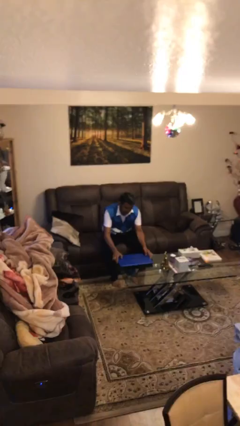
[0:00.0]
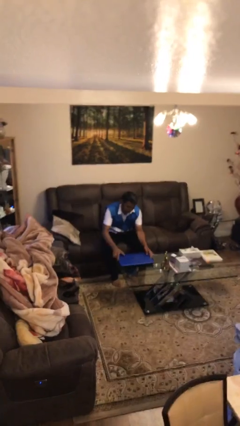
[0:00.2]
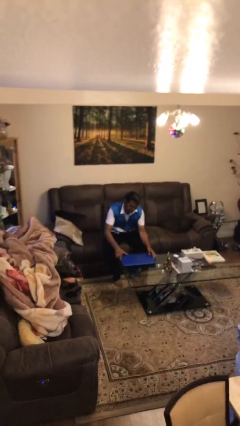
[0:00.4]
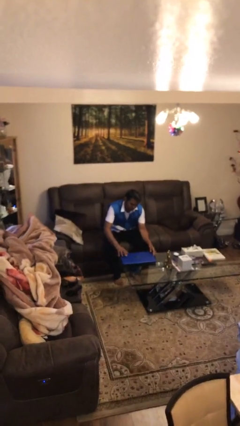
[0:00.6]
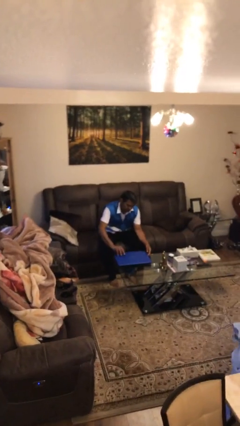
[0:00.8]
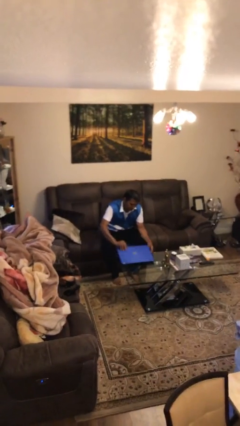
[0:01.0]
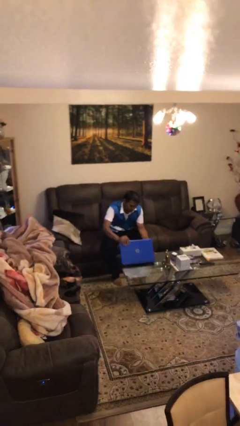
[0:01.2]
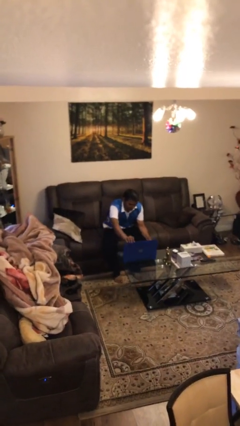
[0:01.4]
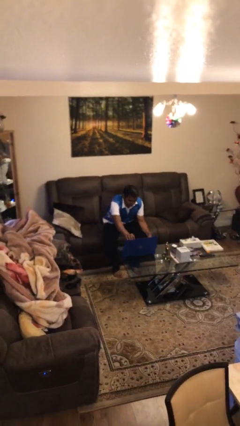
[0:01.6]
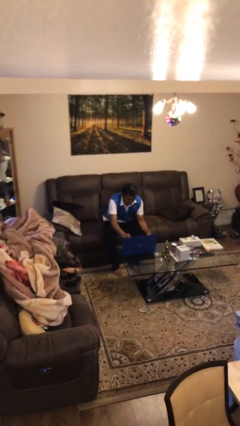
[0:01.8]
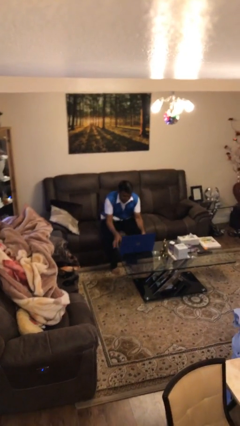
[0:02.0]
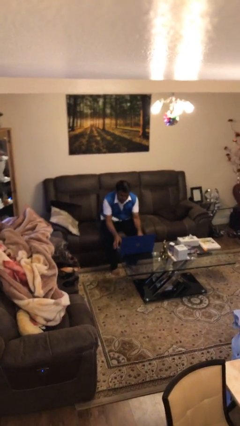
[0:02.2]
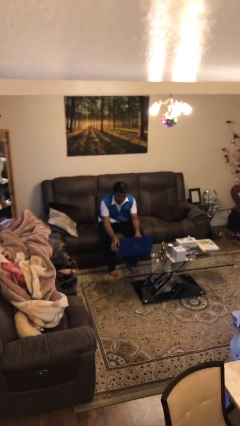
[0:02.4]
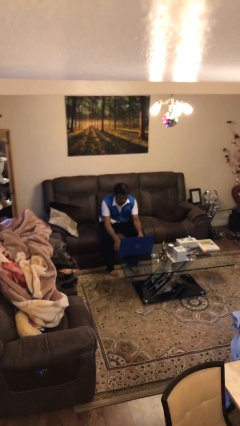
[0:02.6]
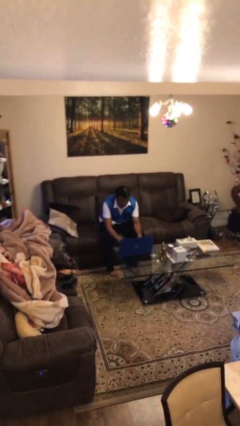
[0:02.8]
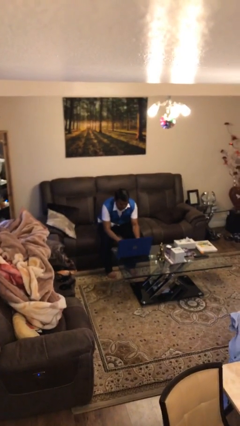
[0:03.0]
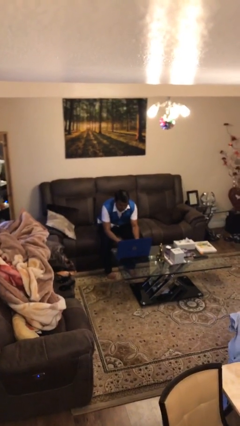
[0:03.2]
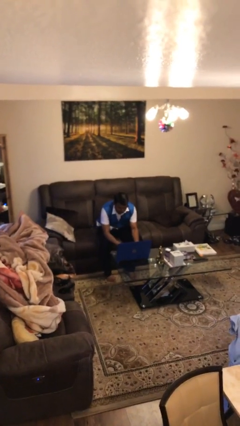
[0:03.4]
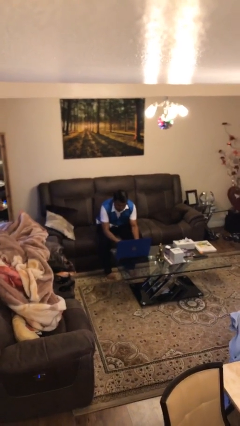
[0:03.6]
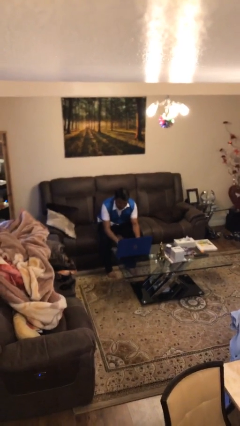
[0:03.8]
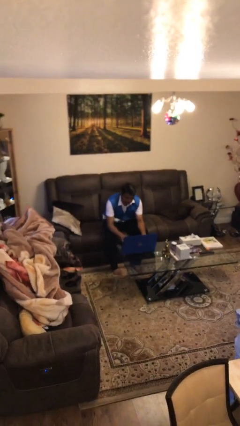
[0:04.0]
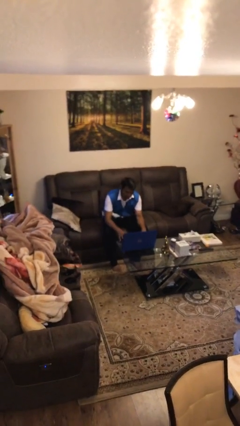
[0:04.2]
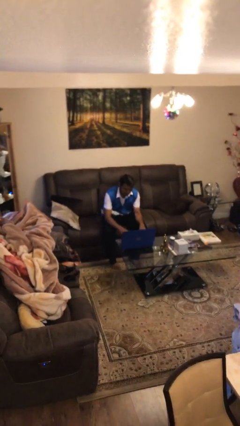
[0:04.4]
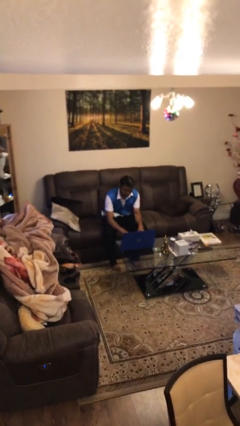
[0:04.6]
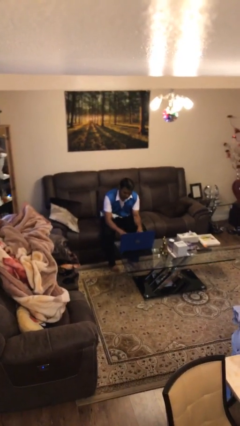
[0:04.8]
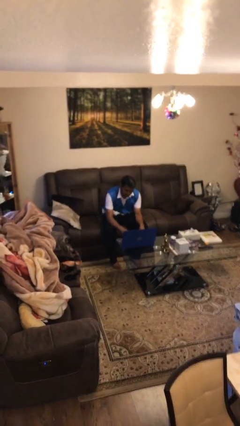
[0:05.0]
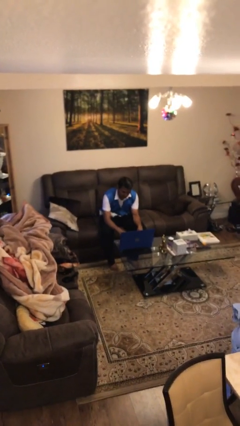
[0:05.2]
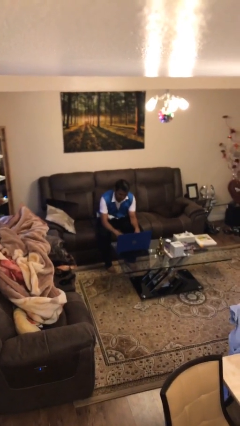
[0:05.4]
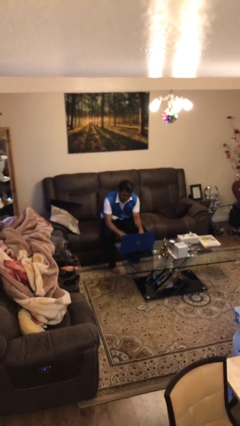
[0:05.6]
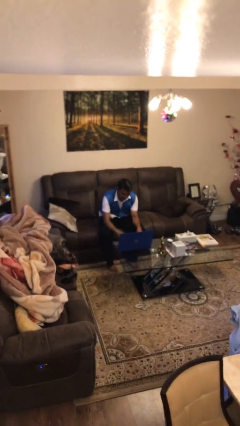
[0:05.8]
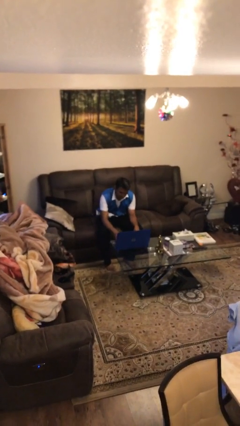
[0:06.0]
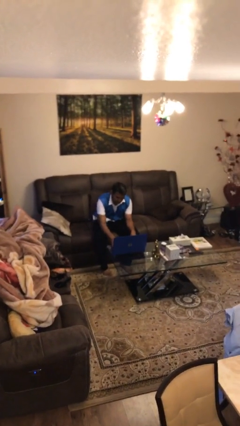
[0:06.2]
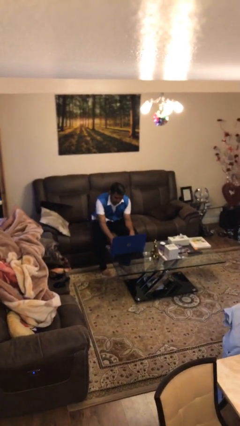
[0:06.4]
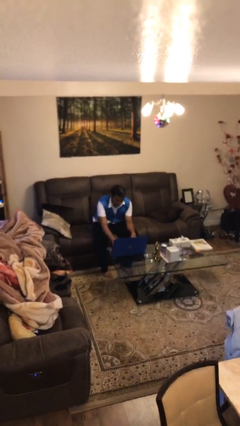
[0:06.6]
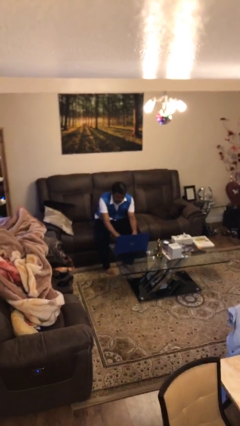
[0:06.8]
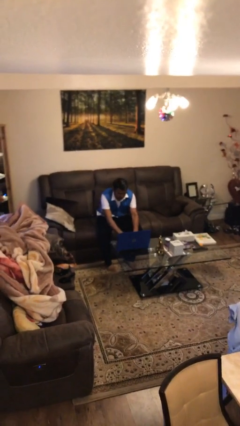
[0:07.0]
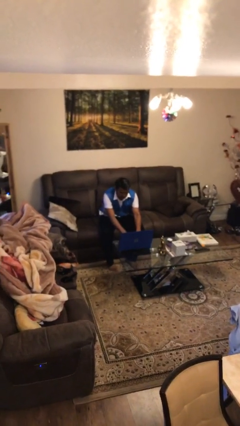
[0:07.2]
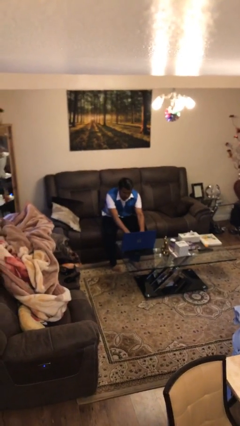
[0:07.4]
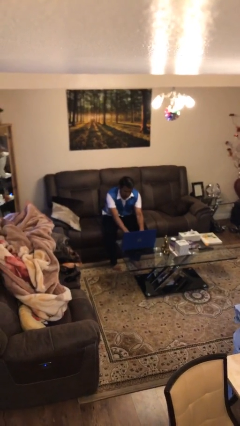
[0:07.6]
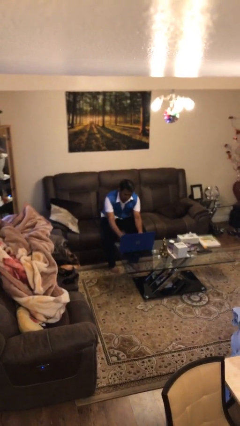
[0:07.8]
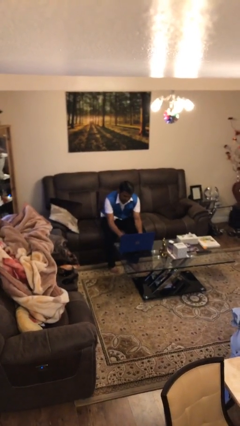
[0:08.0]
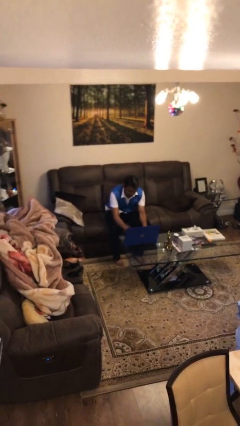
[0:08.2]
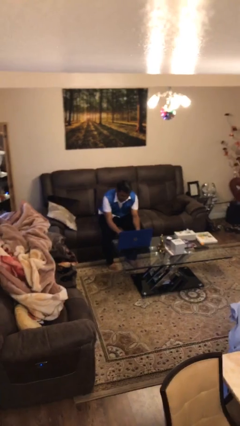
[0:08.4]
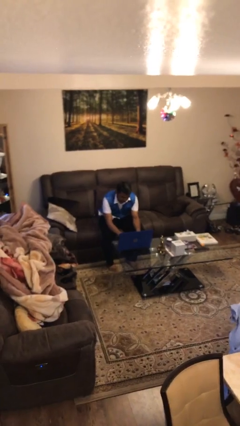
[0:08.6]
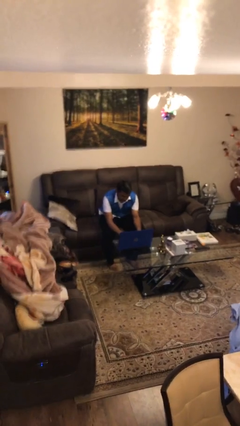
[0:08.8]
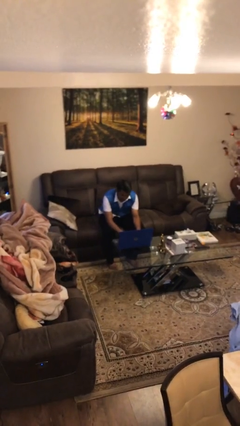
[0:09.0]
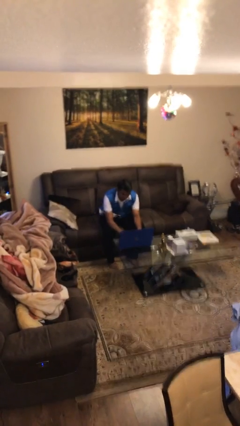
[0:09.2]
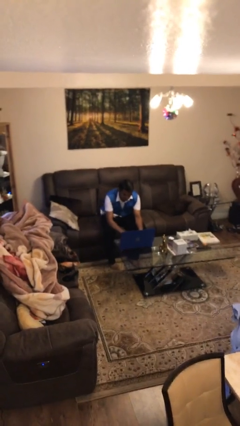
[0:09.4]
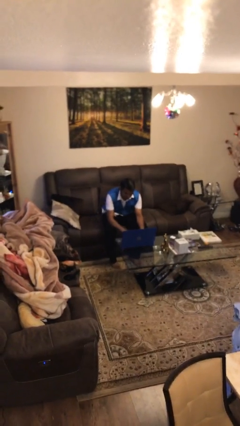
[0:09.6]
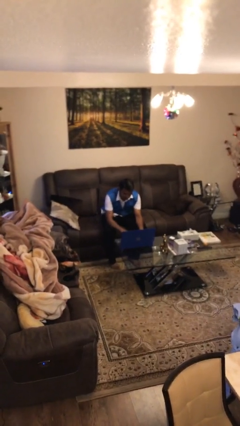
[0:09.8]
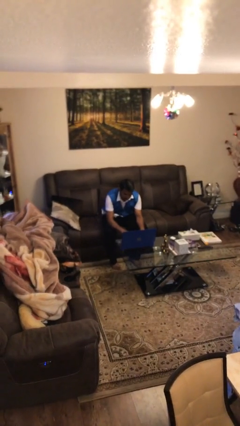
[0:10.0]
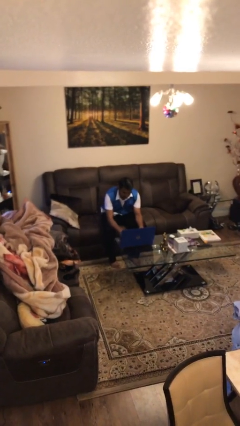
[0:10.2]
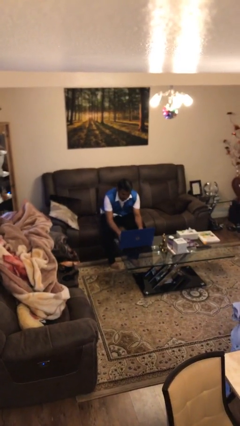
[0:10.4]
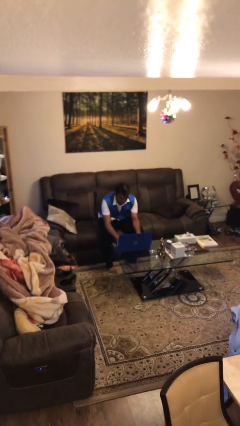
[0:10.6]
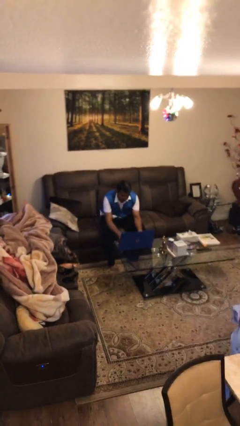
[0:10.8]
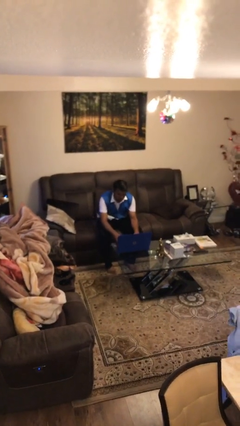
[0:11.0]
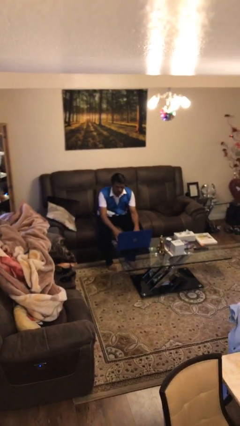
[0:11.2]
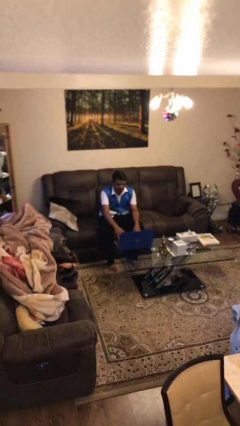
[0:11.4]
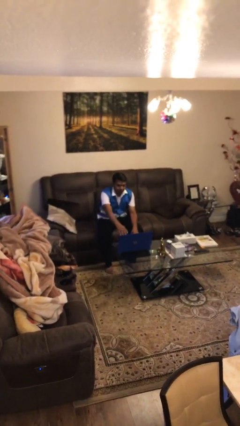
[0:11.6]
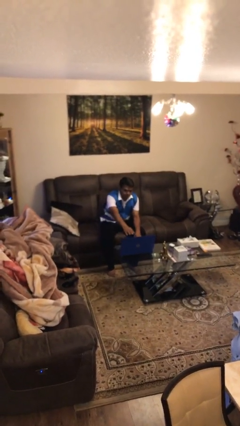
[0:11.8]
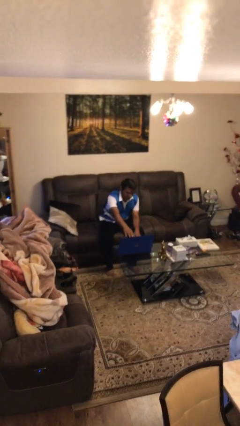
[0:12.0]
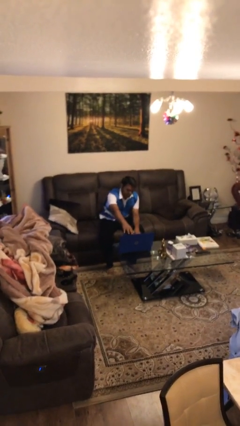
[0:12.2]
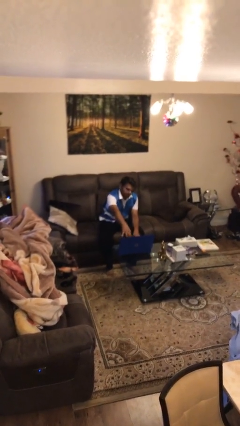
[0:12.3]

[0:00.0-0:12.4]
person interacts with laptop

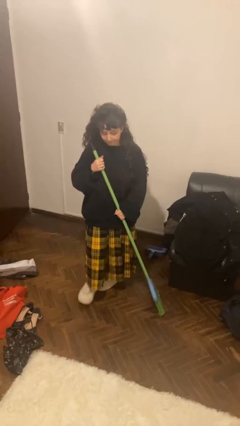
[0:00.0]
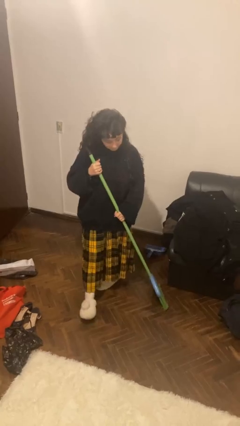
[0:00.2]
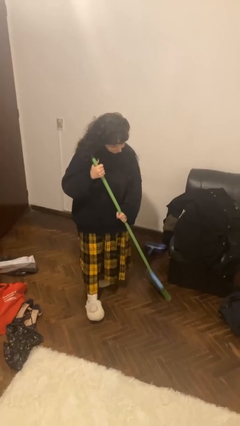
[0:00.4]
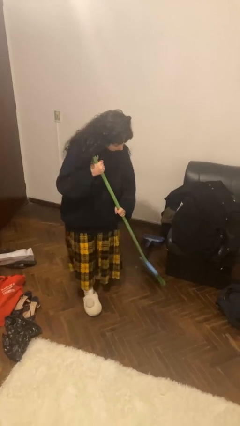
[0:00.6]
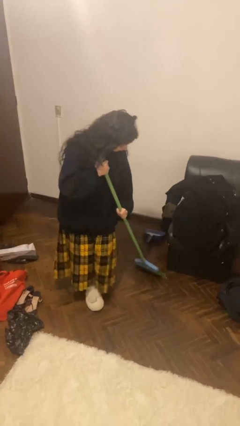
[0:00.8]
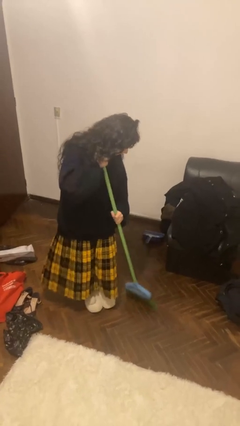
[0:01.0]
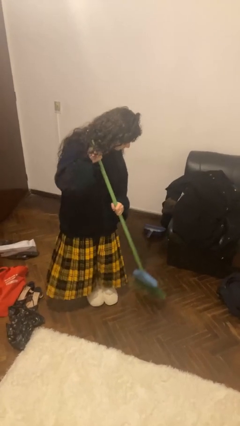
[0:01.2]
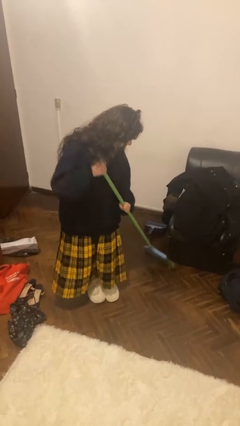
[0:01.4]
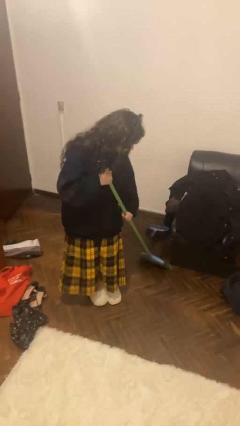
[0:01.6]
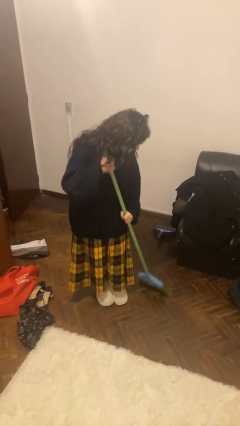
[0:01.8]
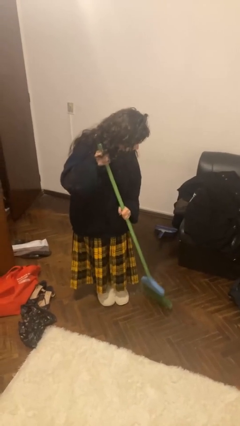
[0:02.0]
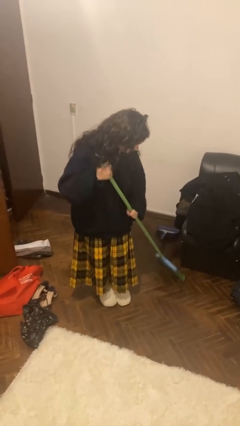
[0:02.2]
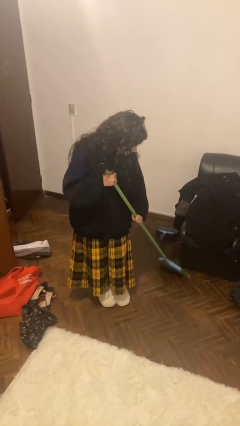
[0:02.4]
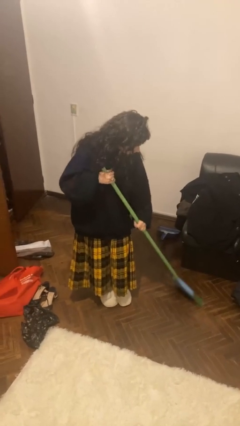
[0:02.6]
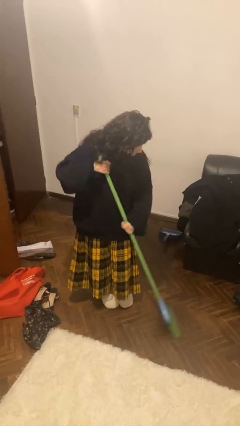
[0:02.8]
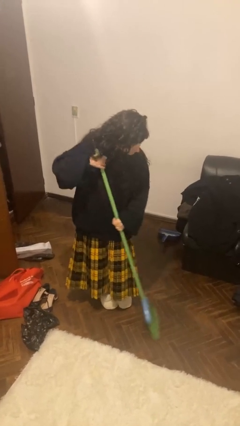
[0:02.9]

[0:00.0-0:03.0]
person sweeps floor

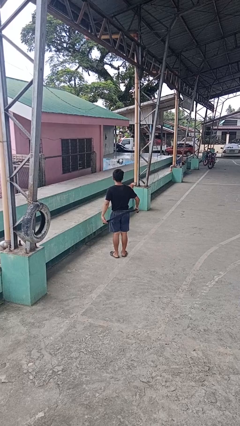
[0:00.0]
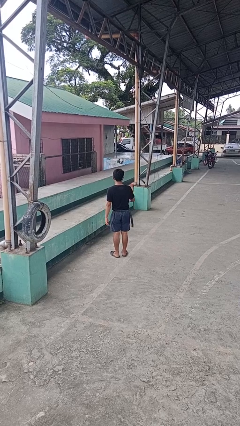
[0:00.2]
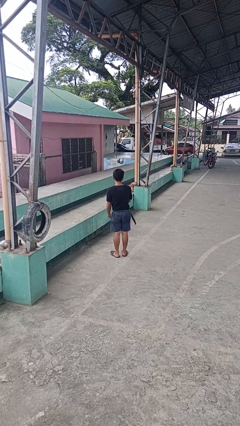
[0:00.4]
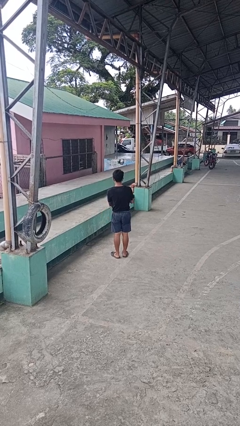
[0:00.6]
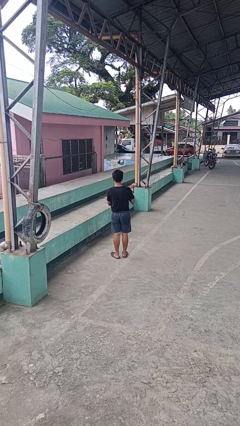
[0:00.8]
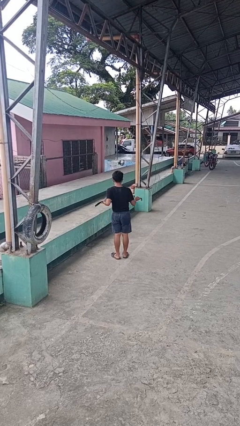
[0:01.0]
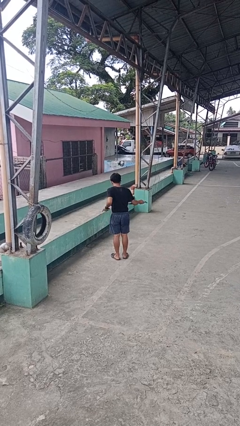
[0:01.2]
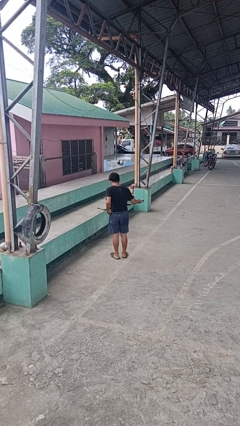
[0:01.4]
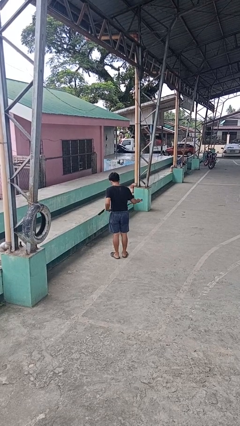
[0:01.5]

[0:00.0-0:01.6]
person takes off belt

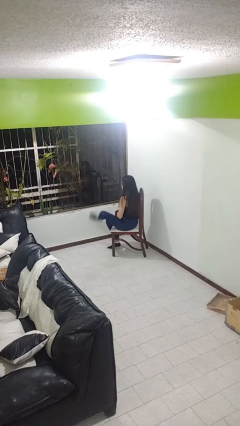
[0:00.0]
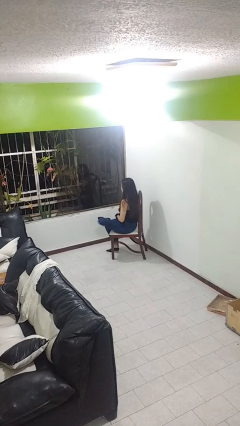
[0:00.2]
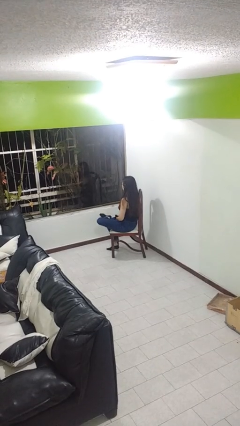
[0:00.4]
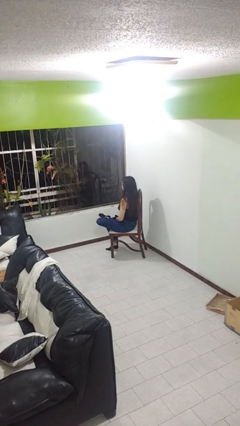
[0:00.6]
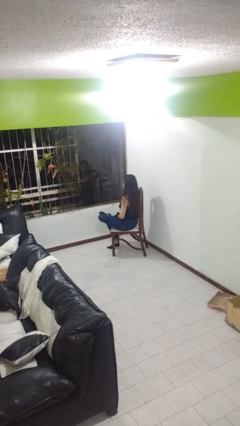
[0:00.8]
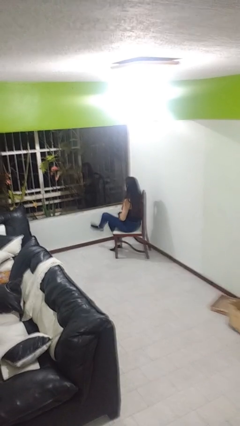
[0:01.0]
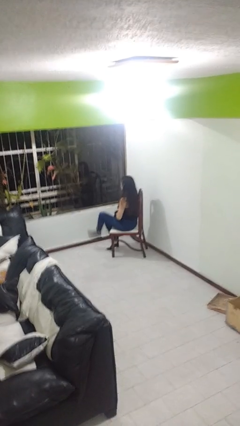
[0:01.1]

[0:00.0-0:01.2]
person crosses legs
